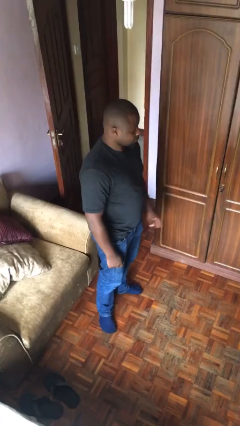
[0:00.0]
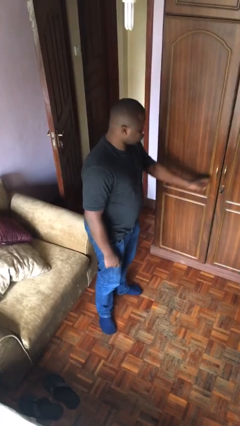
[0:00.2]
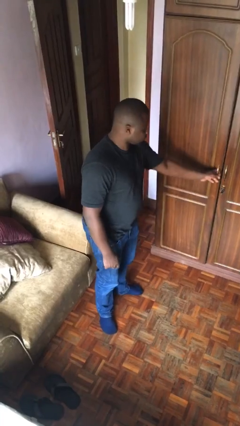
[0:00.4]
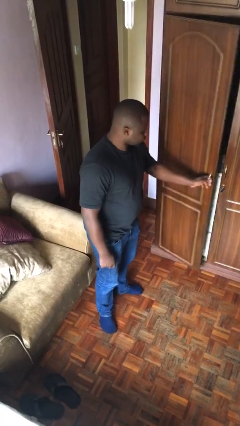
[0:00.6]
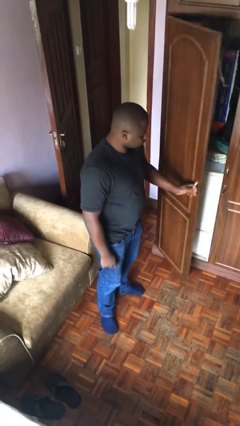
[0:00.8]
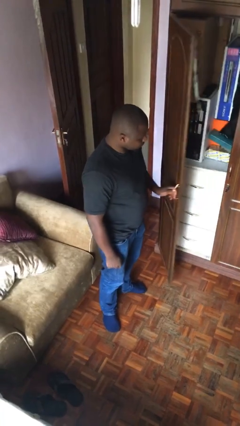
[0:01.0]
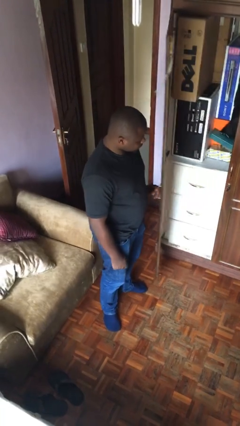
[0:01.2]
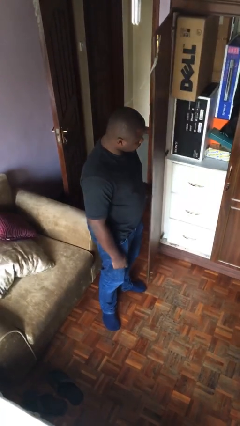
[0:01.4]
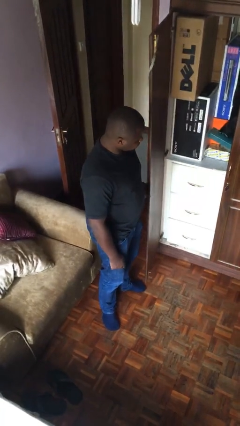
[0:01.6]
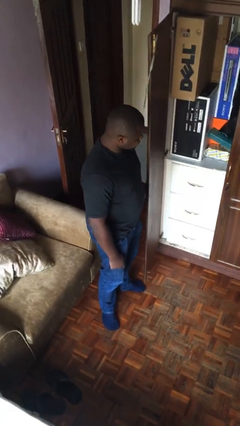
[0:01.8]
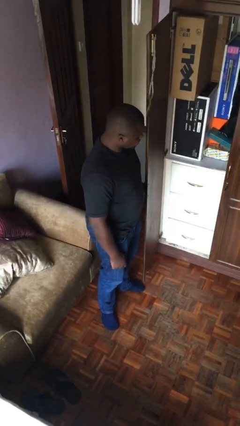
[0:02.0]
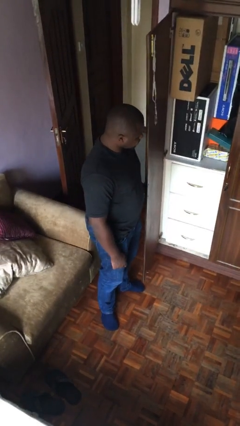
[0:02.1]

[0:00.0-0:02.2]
person opens dresser drawer

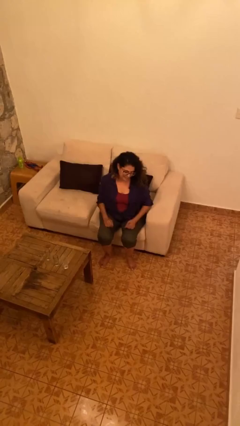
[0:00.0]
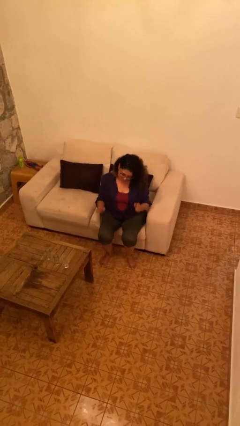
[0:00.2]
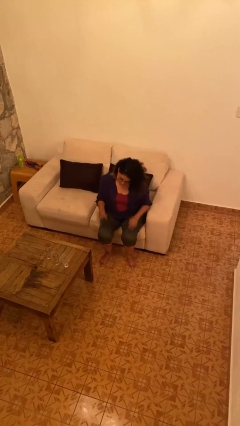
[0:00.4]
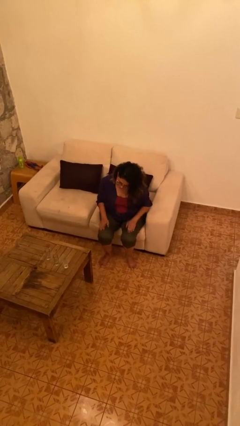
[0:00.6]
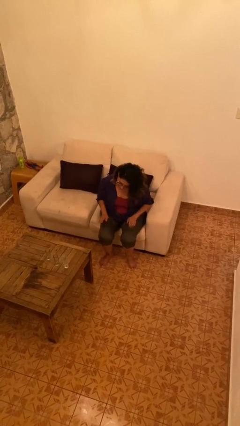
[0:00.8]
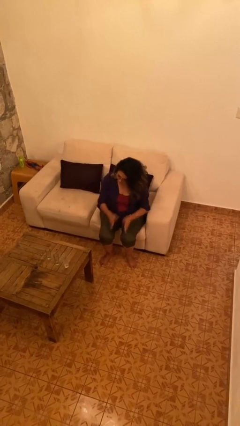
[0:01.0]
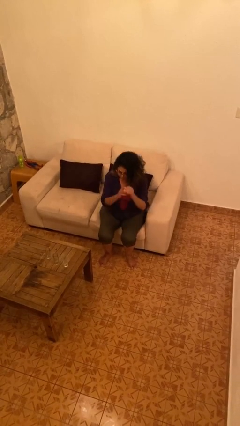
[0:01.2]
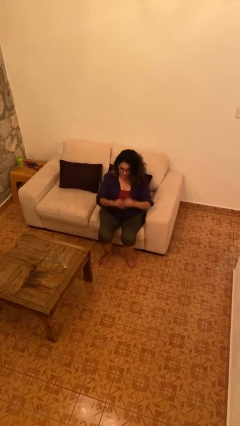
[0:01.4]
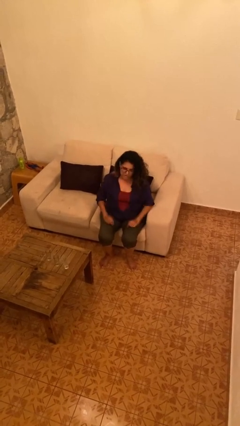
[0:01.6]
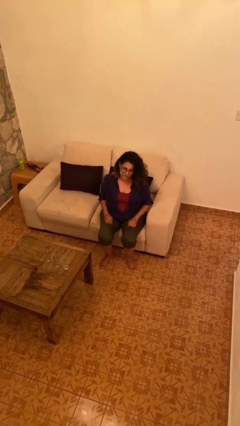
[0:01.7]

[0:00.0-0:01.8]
person slaps hands on thighs

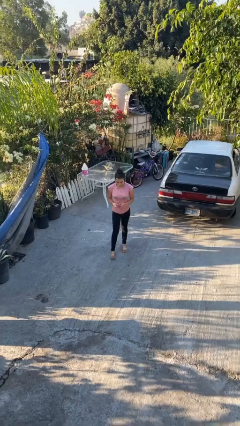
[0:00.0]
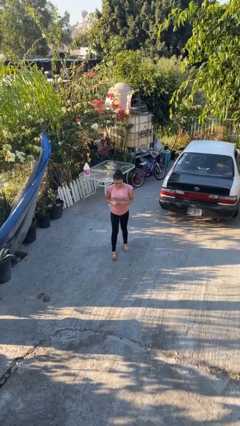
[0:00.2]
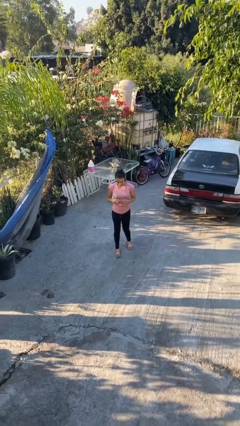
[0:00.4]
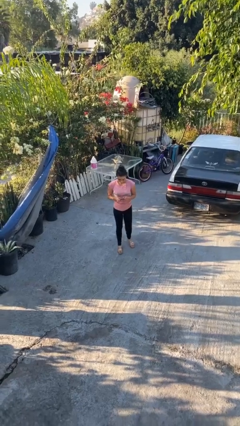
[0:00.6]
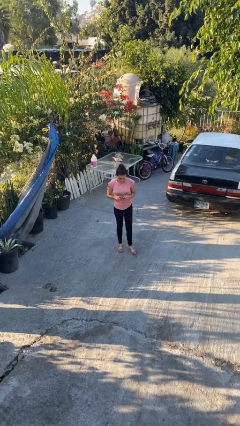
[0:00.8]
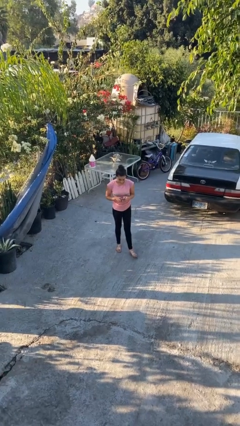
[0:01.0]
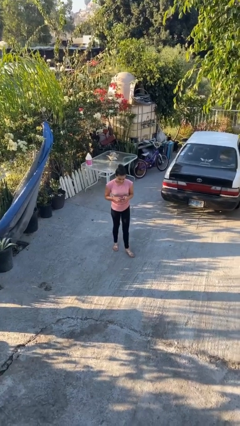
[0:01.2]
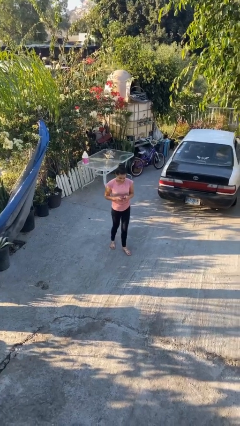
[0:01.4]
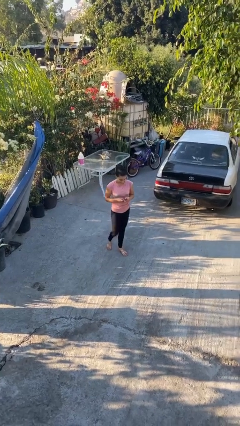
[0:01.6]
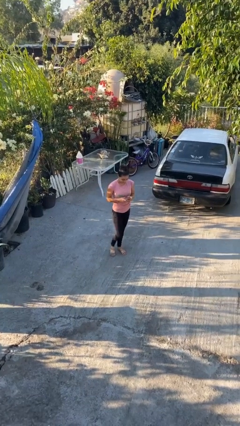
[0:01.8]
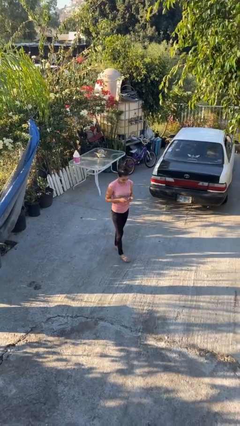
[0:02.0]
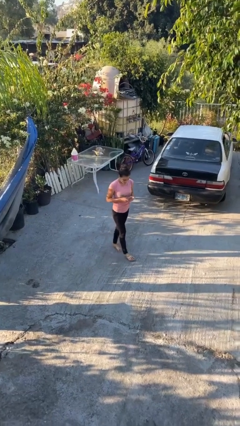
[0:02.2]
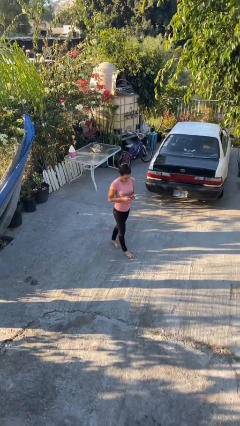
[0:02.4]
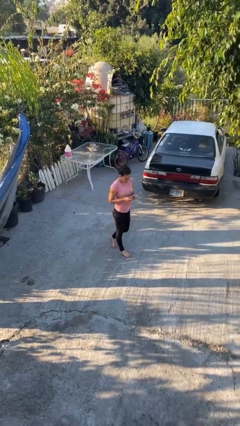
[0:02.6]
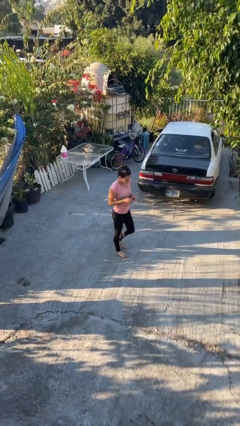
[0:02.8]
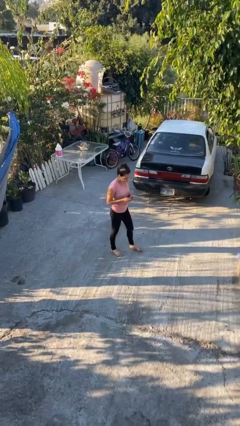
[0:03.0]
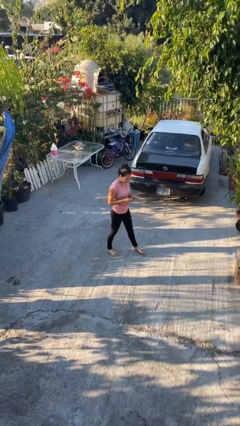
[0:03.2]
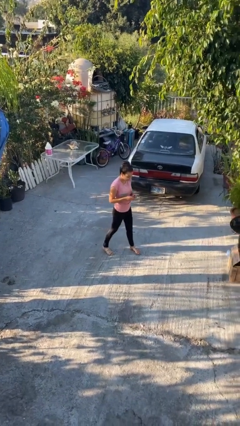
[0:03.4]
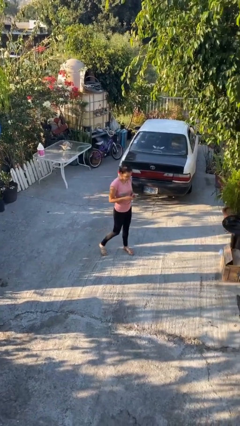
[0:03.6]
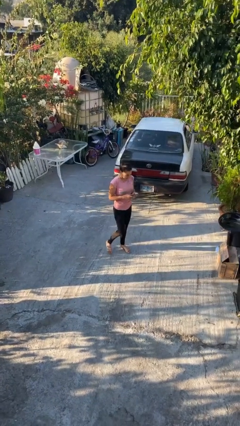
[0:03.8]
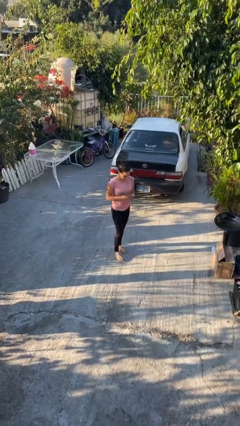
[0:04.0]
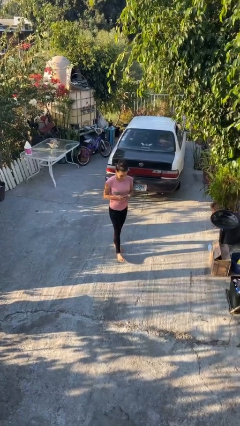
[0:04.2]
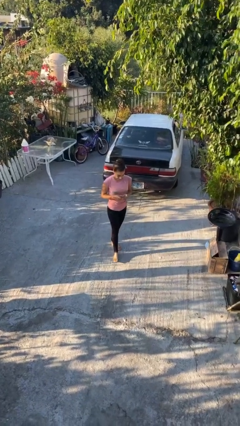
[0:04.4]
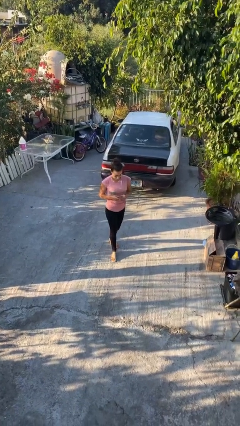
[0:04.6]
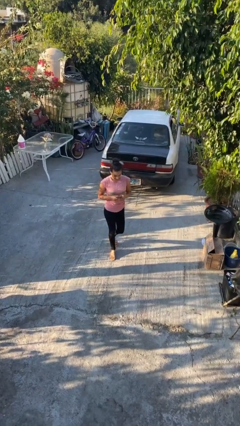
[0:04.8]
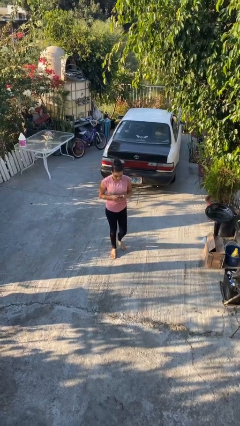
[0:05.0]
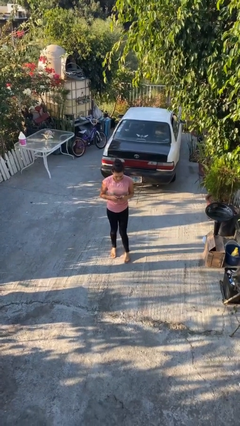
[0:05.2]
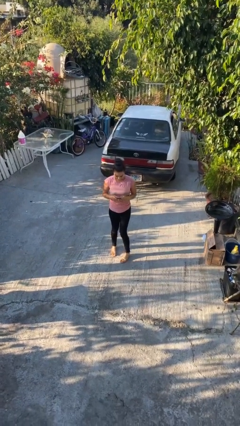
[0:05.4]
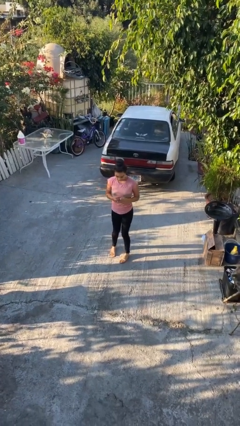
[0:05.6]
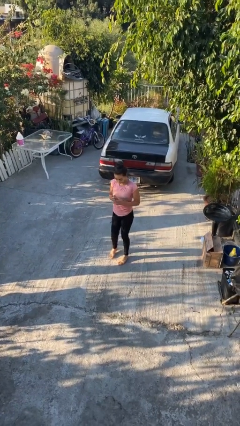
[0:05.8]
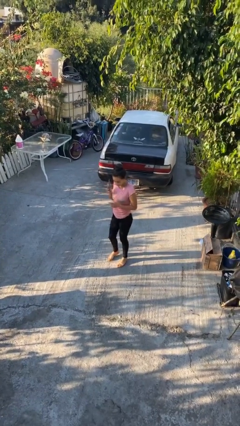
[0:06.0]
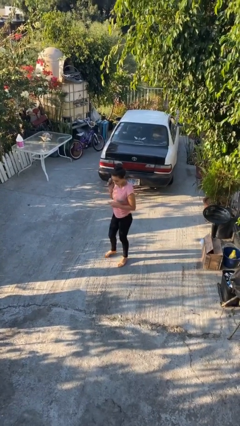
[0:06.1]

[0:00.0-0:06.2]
person texts on phone

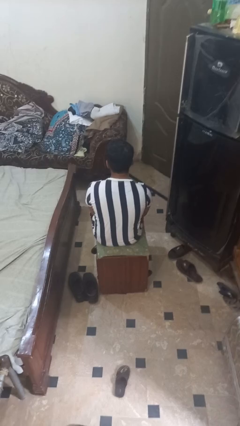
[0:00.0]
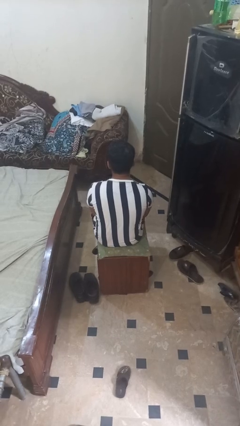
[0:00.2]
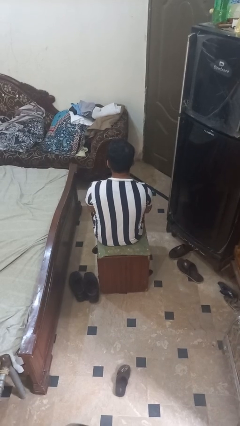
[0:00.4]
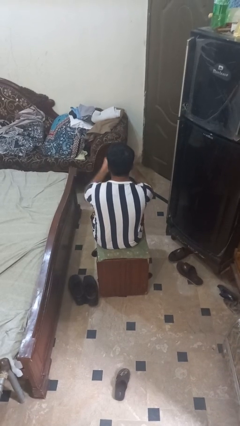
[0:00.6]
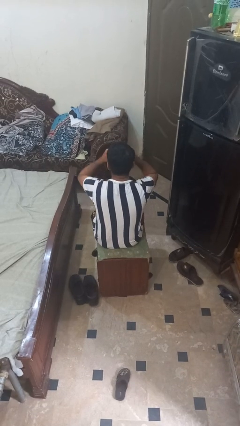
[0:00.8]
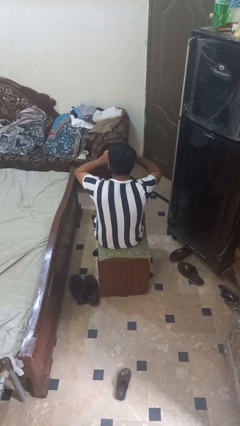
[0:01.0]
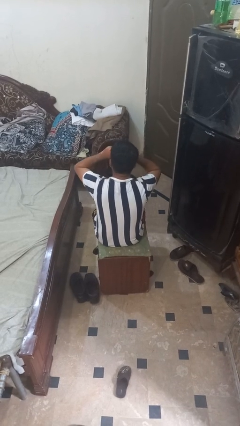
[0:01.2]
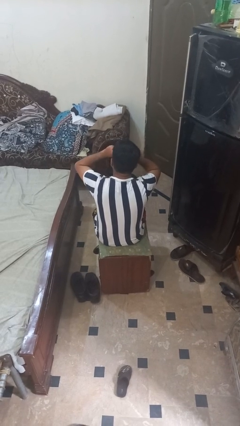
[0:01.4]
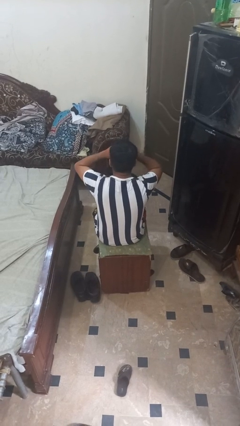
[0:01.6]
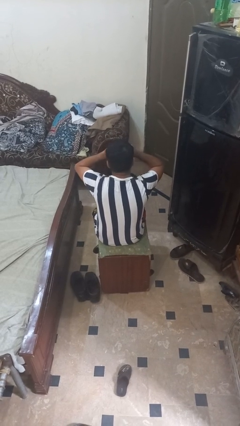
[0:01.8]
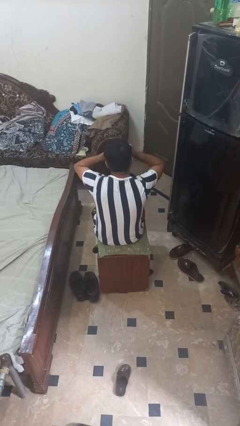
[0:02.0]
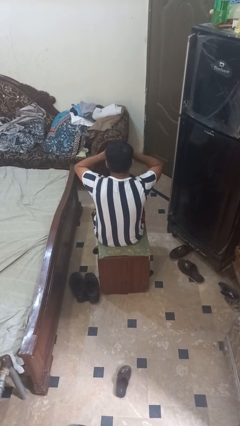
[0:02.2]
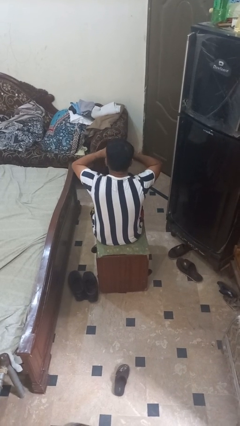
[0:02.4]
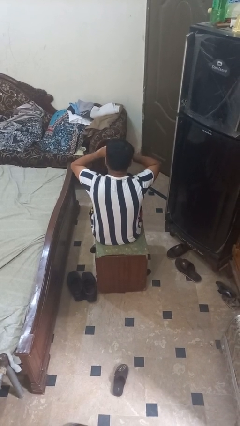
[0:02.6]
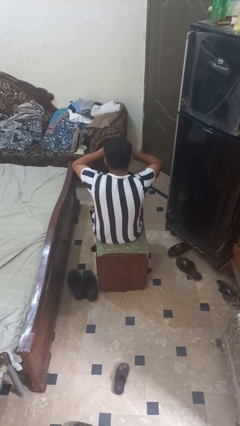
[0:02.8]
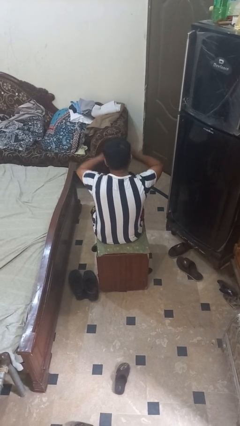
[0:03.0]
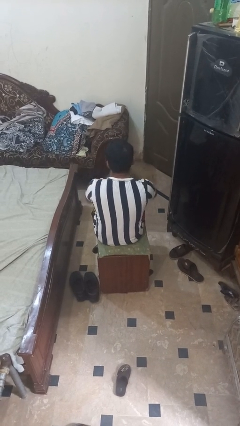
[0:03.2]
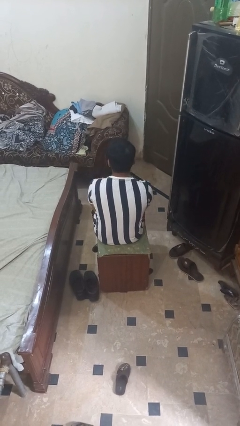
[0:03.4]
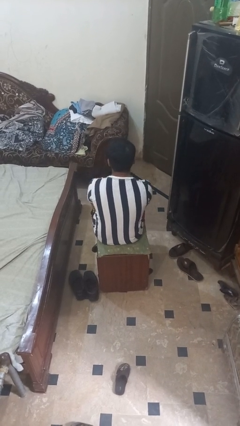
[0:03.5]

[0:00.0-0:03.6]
person rubs eyes

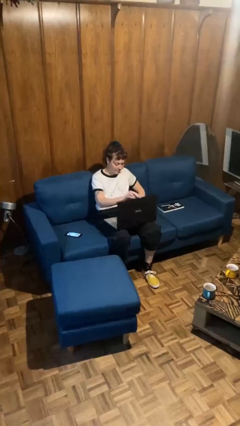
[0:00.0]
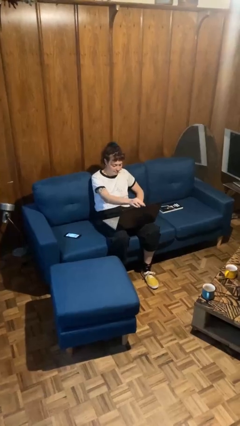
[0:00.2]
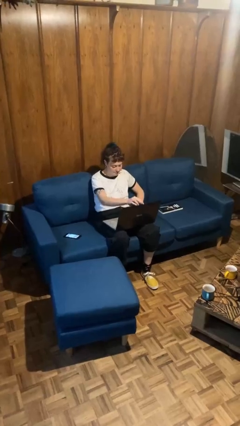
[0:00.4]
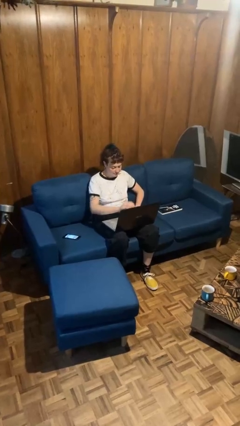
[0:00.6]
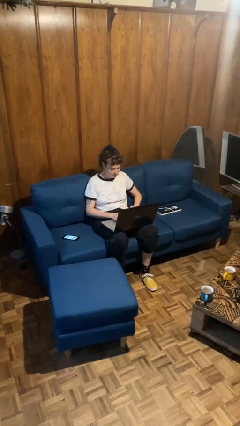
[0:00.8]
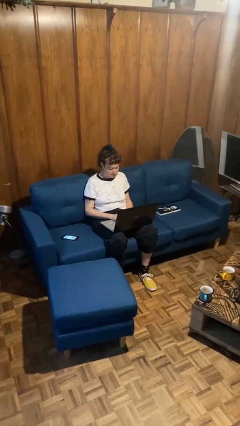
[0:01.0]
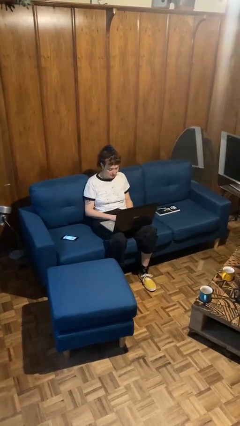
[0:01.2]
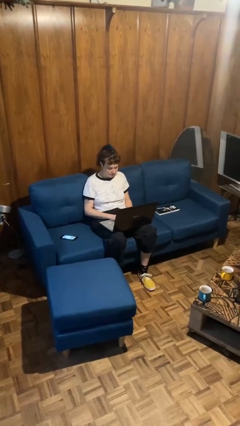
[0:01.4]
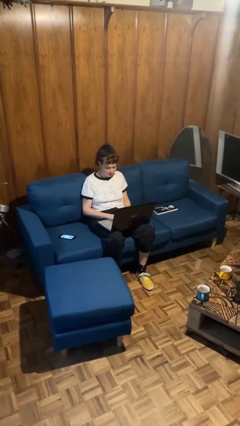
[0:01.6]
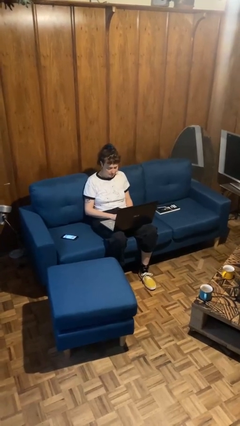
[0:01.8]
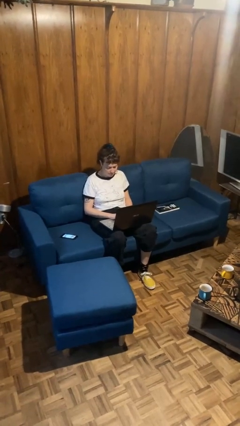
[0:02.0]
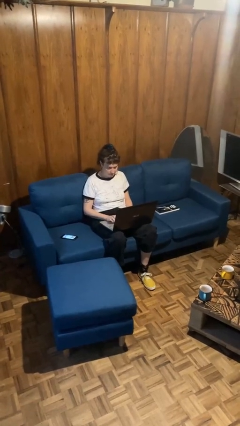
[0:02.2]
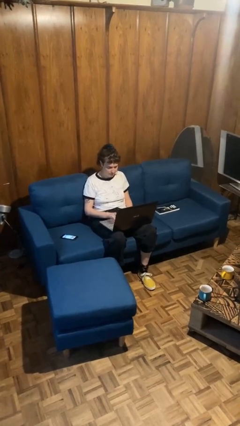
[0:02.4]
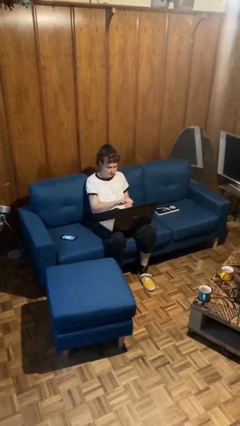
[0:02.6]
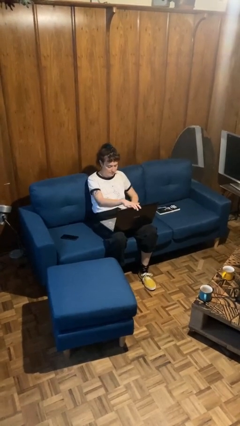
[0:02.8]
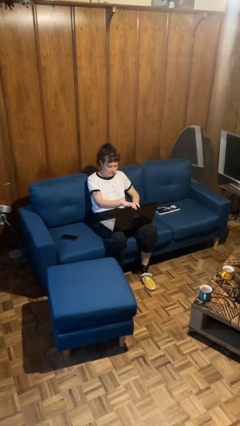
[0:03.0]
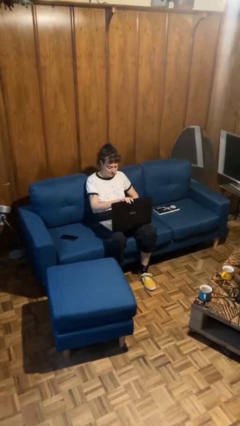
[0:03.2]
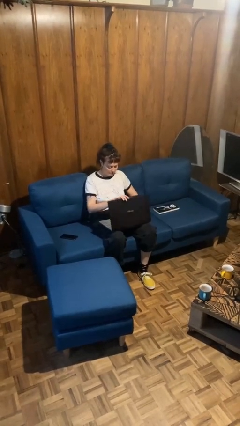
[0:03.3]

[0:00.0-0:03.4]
person interacts with laptop

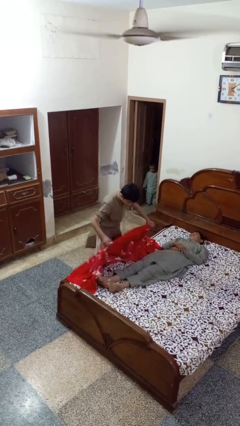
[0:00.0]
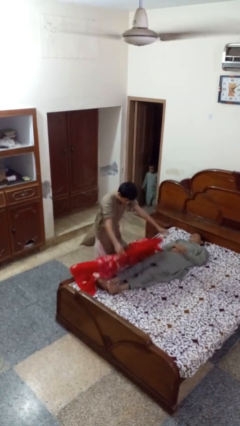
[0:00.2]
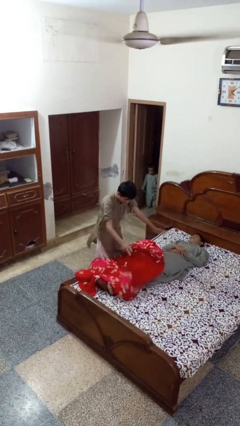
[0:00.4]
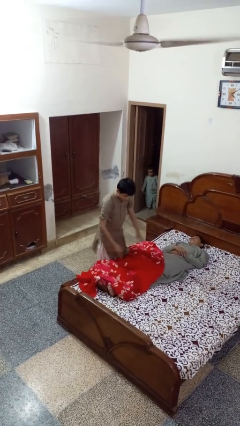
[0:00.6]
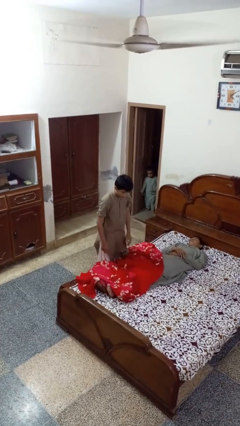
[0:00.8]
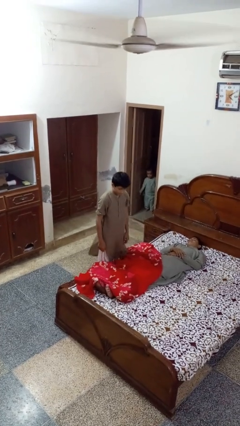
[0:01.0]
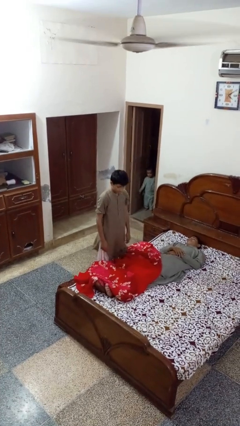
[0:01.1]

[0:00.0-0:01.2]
person covers friend with blanket
